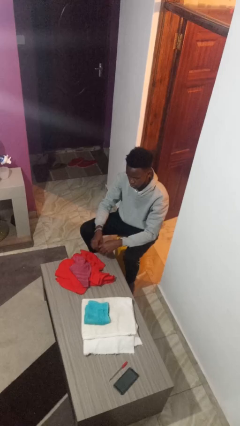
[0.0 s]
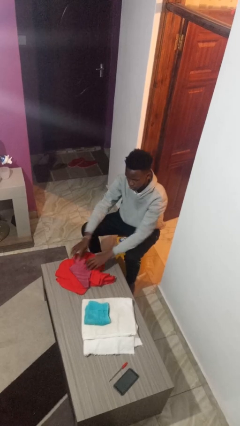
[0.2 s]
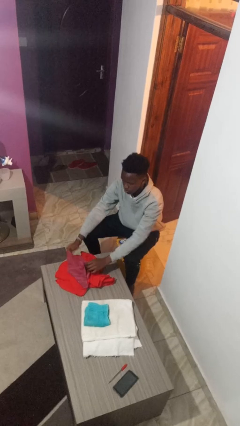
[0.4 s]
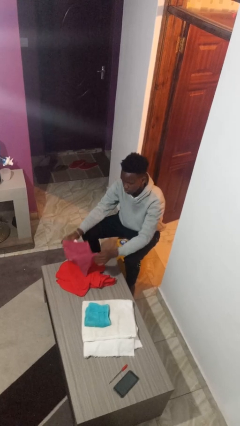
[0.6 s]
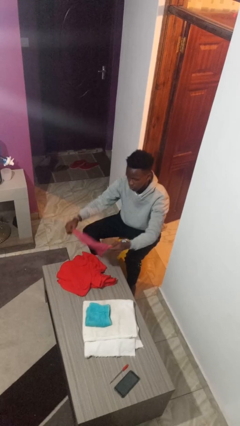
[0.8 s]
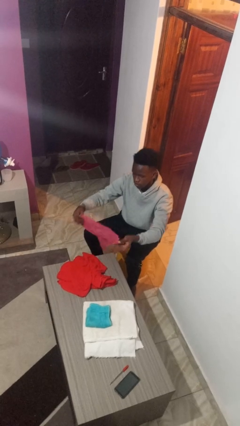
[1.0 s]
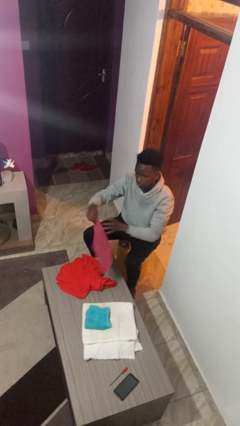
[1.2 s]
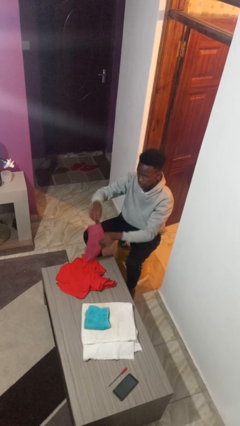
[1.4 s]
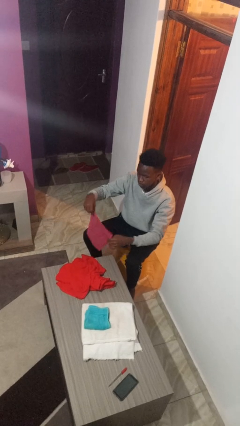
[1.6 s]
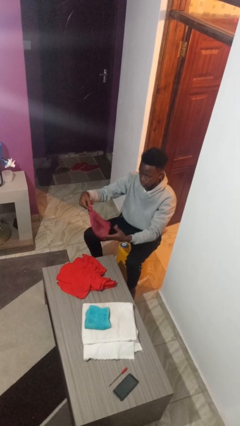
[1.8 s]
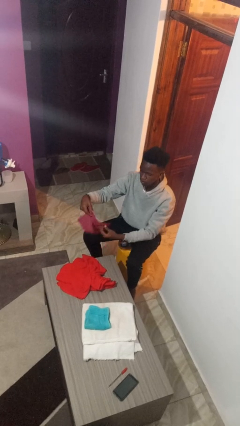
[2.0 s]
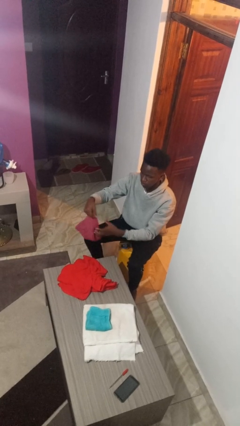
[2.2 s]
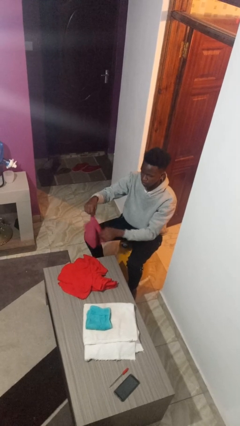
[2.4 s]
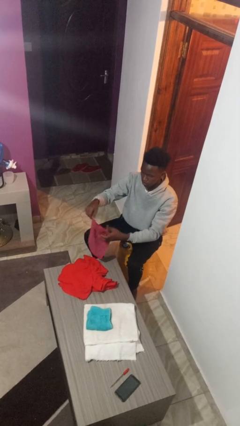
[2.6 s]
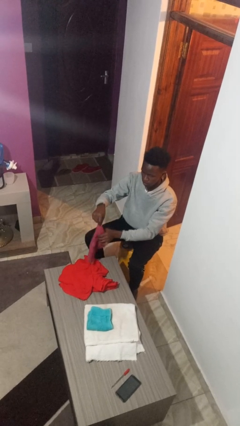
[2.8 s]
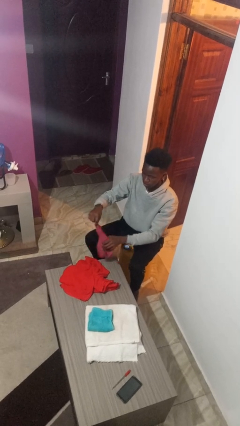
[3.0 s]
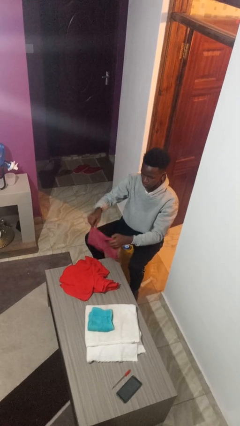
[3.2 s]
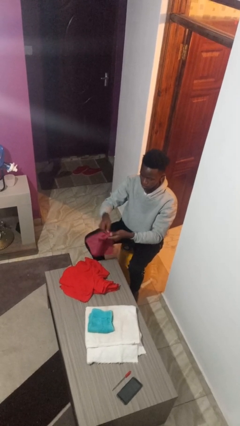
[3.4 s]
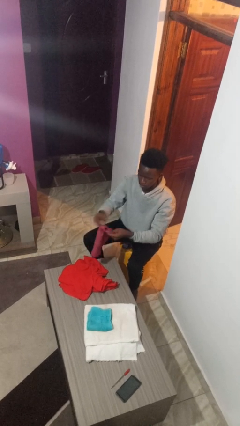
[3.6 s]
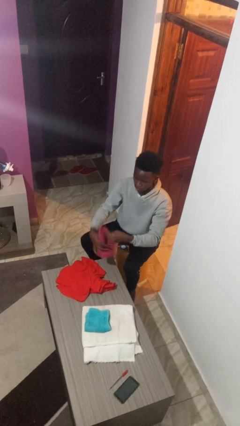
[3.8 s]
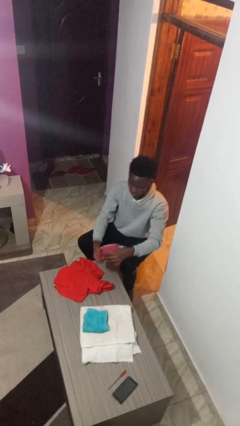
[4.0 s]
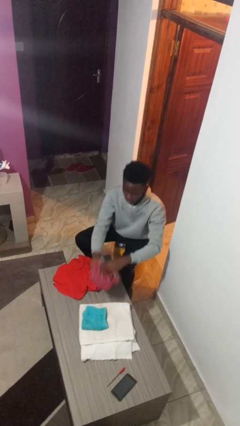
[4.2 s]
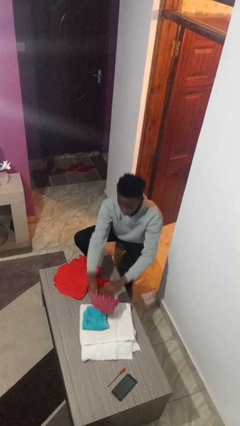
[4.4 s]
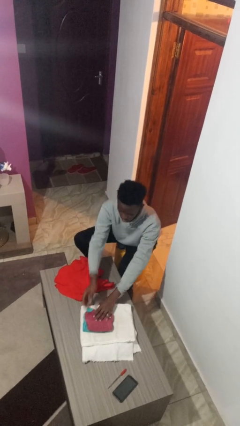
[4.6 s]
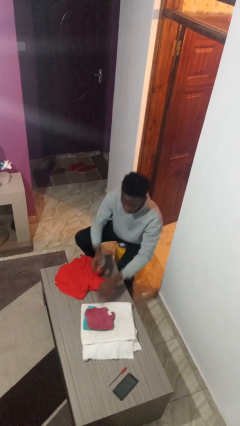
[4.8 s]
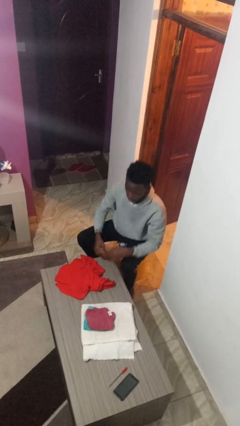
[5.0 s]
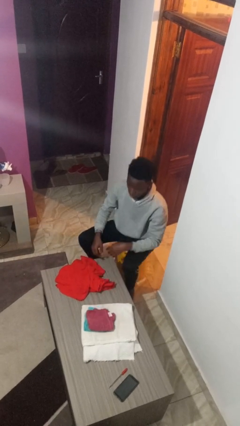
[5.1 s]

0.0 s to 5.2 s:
person folds towel

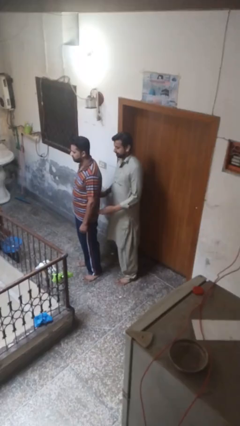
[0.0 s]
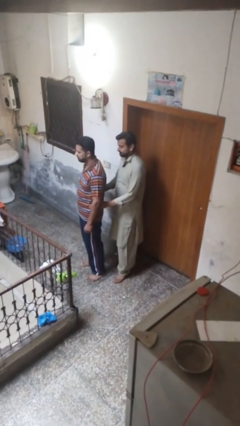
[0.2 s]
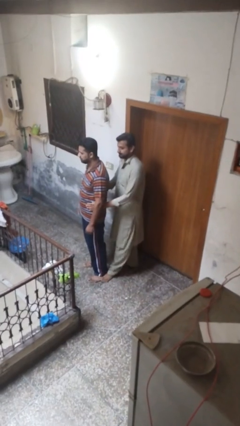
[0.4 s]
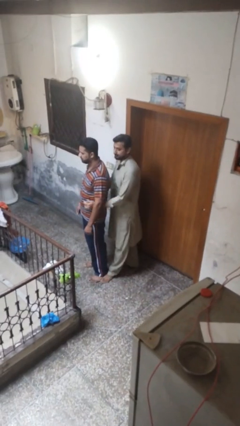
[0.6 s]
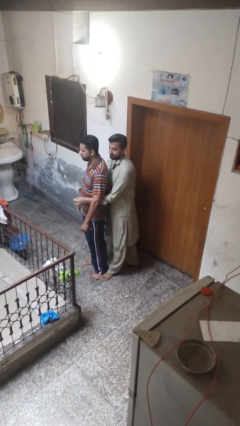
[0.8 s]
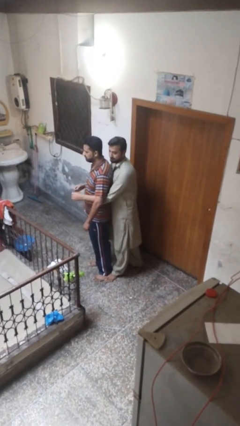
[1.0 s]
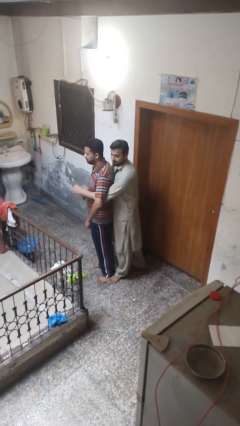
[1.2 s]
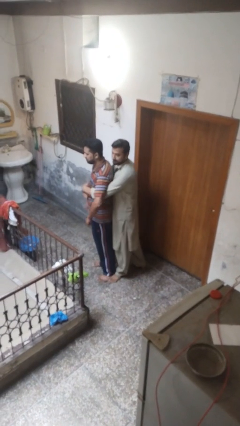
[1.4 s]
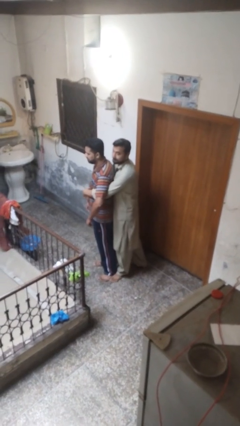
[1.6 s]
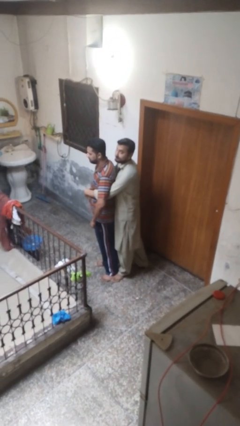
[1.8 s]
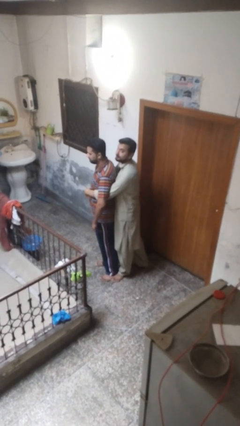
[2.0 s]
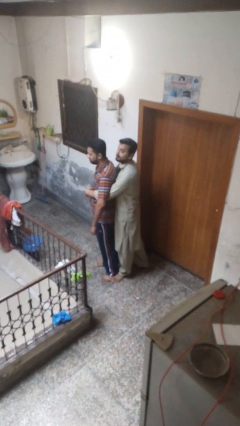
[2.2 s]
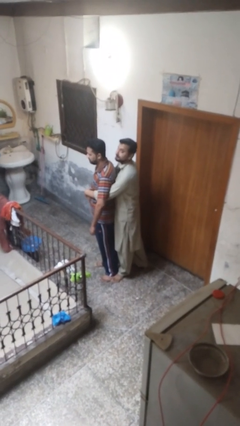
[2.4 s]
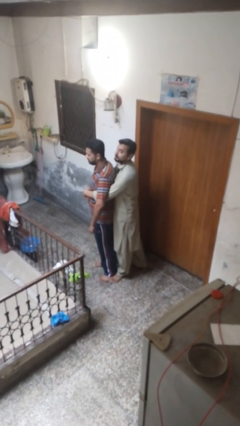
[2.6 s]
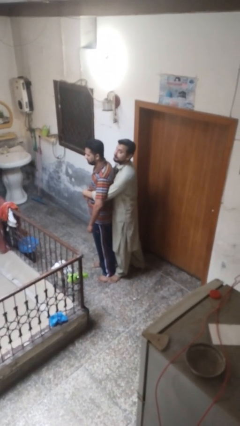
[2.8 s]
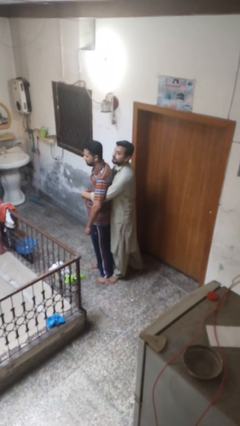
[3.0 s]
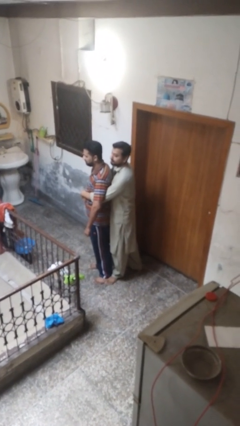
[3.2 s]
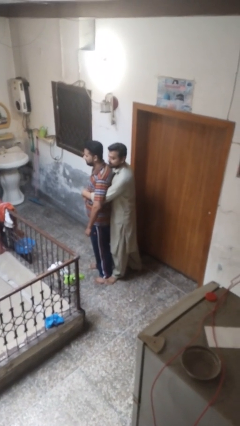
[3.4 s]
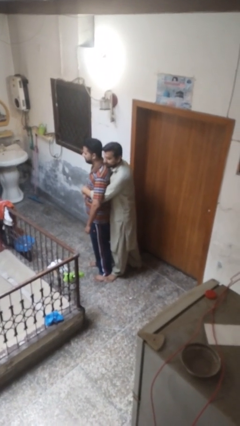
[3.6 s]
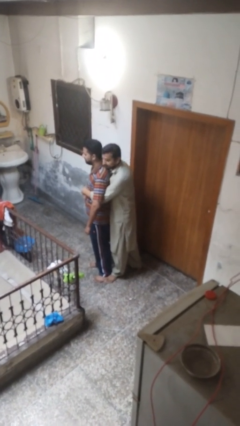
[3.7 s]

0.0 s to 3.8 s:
person hugs person from behind

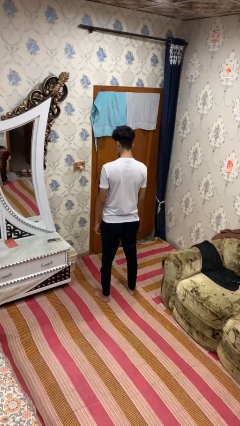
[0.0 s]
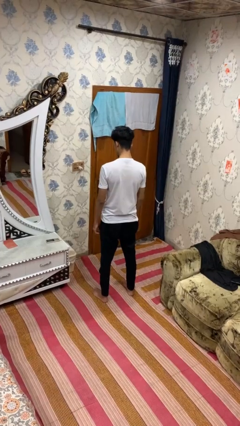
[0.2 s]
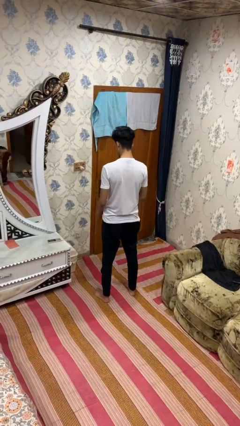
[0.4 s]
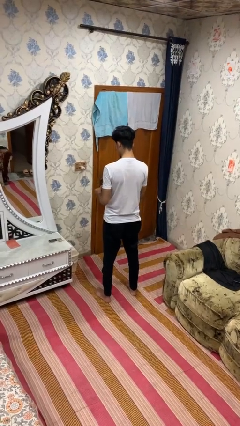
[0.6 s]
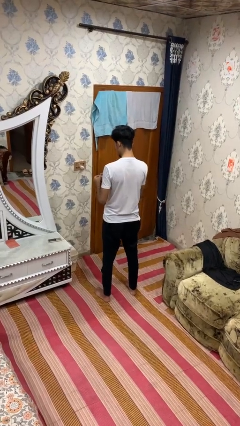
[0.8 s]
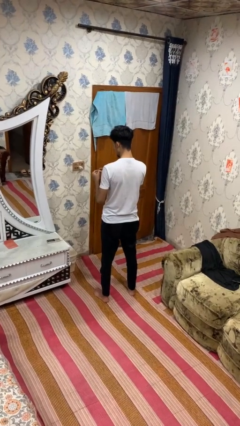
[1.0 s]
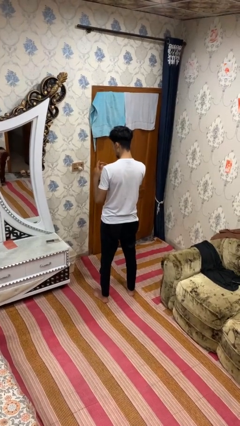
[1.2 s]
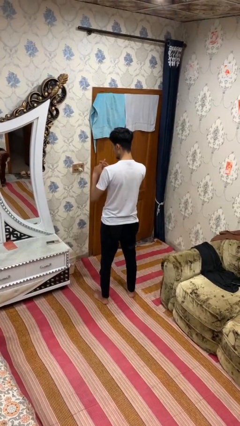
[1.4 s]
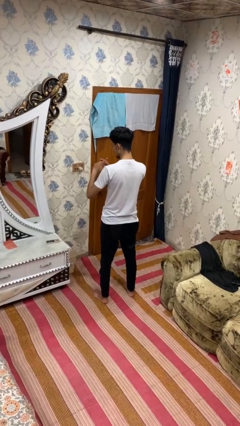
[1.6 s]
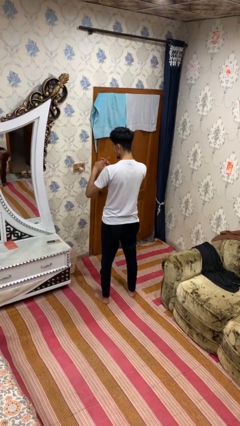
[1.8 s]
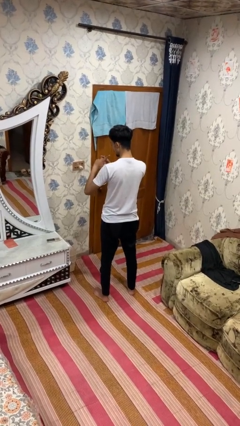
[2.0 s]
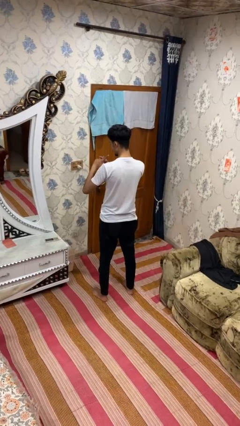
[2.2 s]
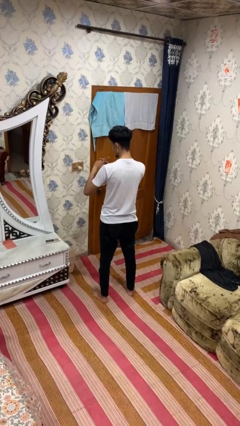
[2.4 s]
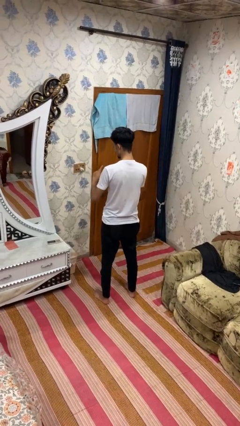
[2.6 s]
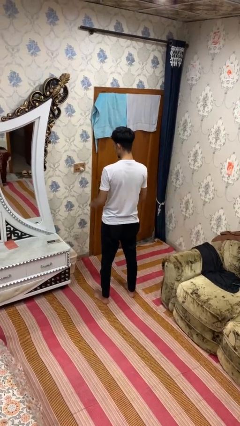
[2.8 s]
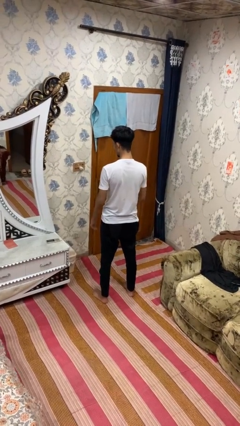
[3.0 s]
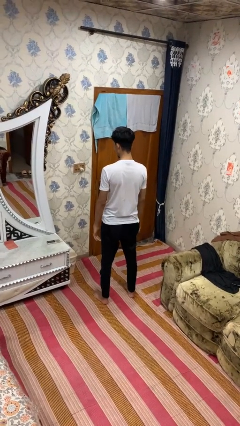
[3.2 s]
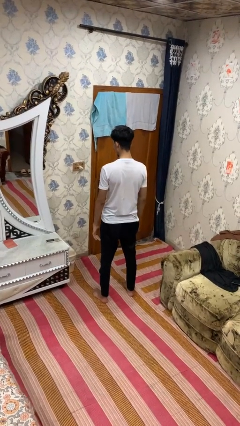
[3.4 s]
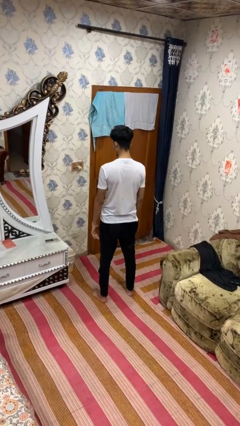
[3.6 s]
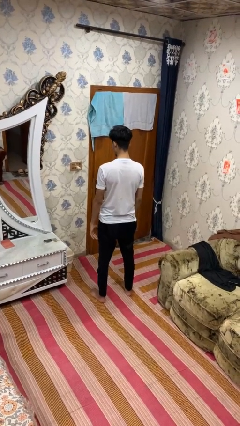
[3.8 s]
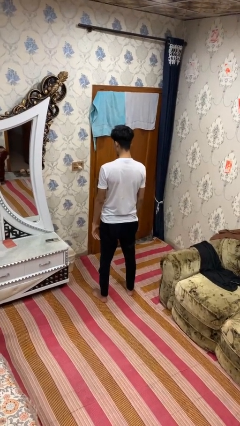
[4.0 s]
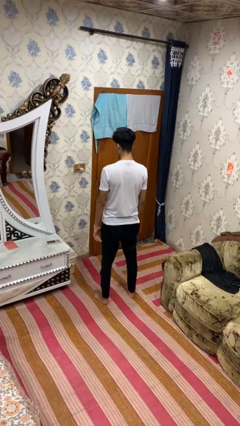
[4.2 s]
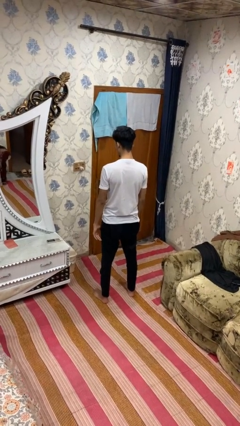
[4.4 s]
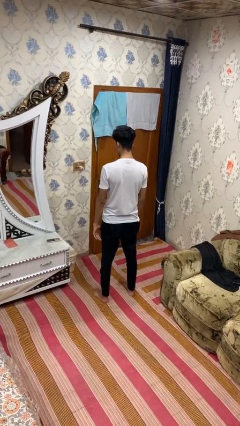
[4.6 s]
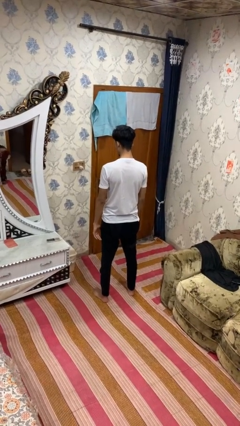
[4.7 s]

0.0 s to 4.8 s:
person puts on ring

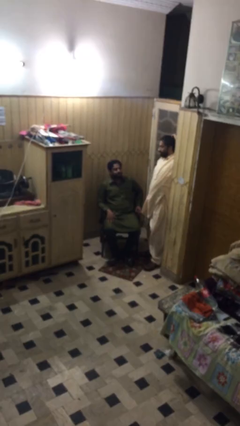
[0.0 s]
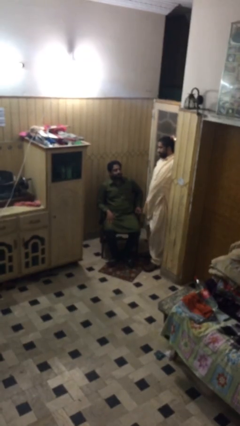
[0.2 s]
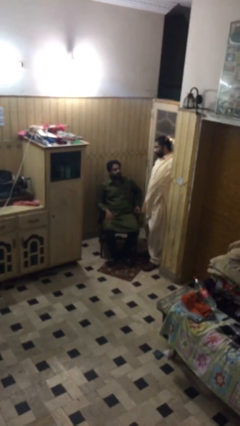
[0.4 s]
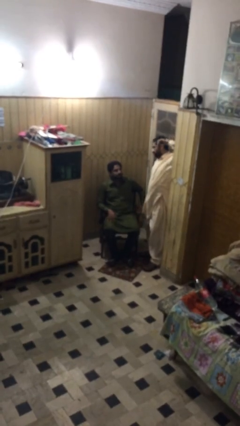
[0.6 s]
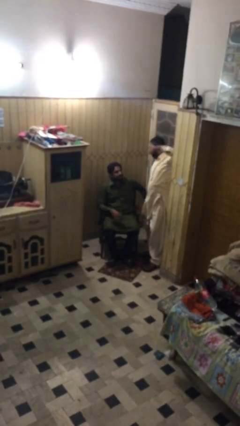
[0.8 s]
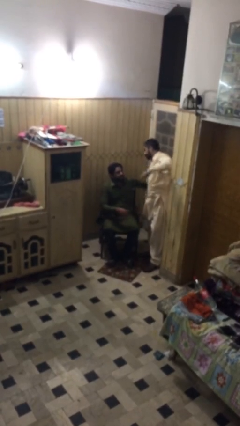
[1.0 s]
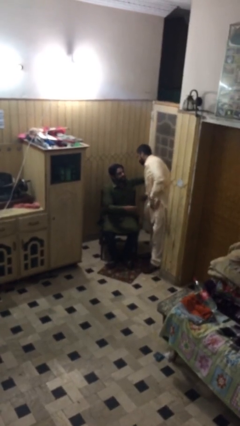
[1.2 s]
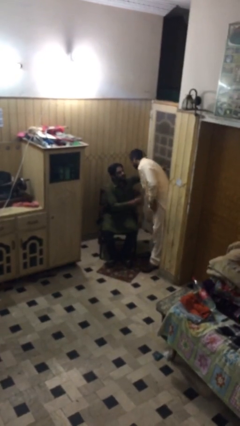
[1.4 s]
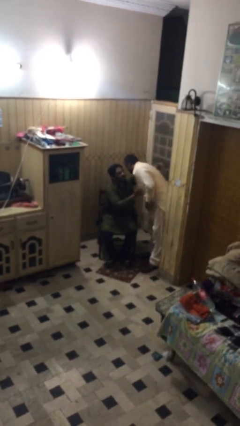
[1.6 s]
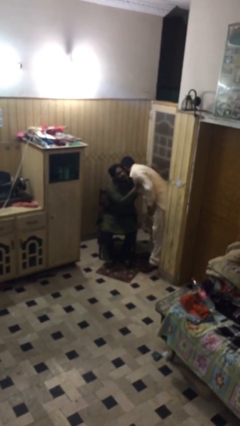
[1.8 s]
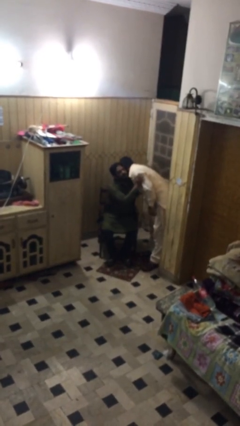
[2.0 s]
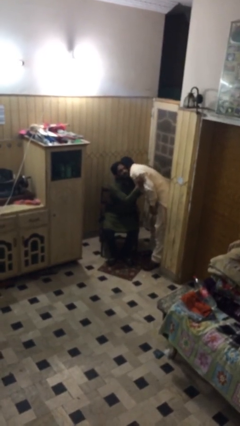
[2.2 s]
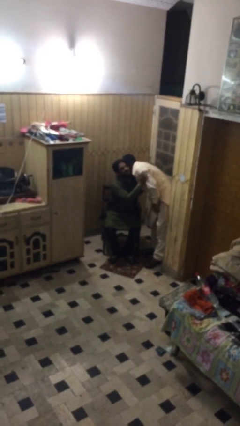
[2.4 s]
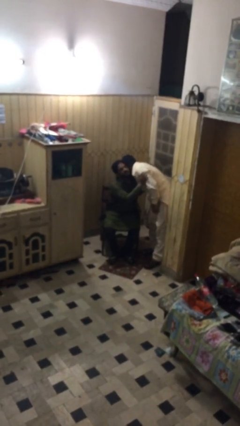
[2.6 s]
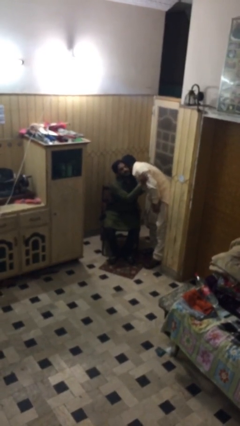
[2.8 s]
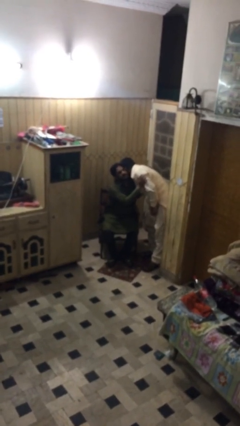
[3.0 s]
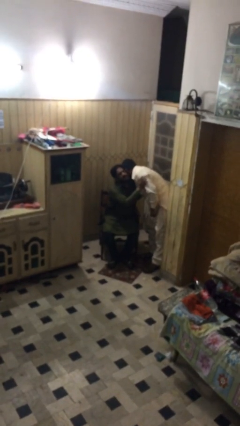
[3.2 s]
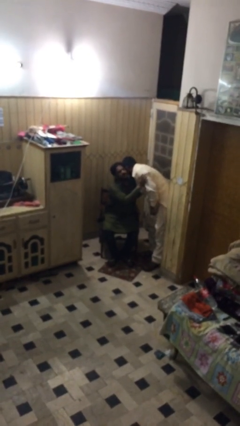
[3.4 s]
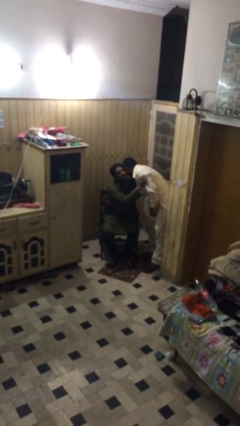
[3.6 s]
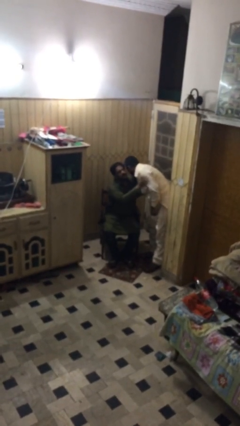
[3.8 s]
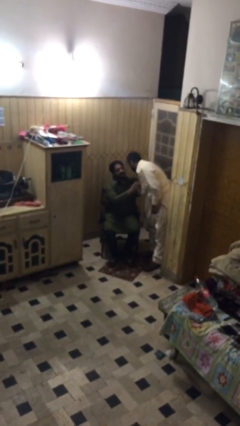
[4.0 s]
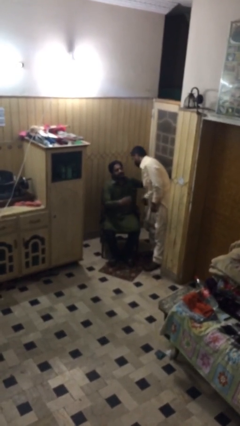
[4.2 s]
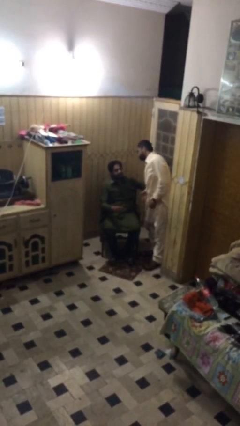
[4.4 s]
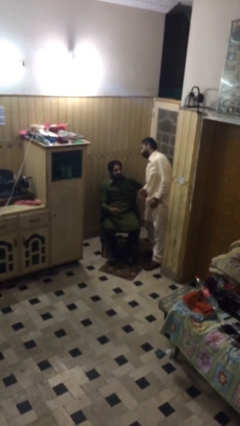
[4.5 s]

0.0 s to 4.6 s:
person embraces person
